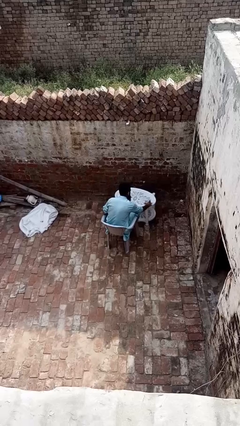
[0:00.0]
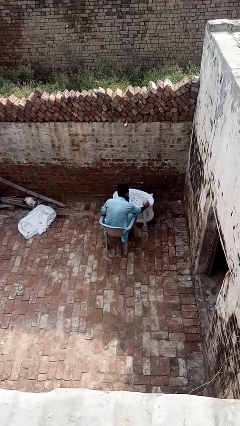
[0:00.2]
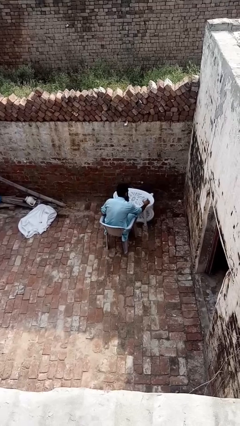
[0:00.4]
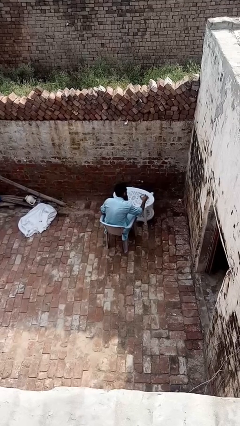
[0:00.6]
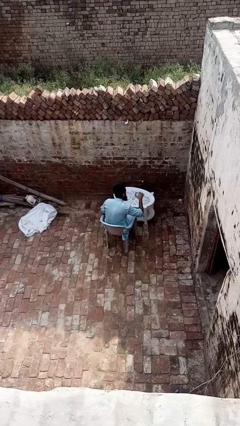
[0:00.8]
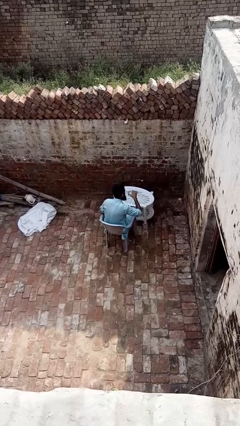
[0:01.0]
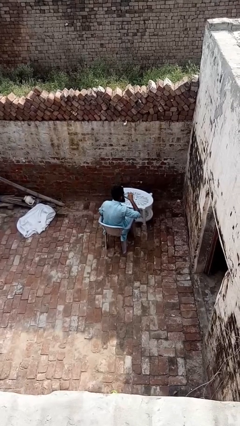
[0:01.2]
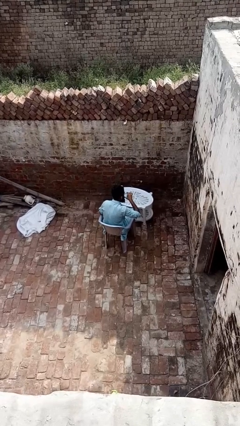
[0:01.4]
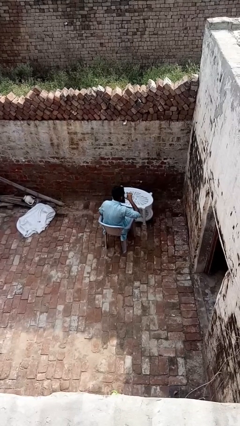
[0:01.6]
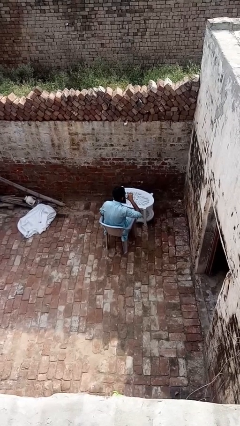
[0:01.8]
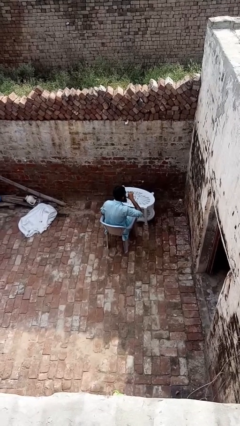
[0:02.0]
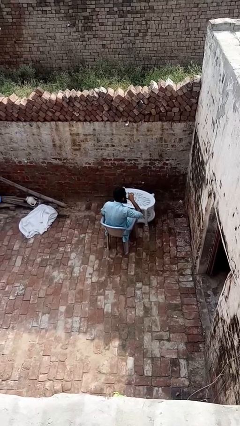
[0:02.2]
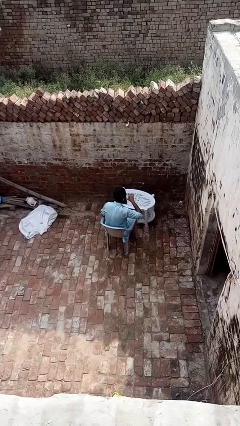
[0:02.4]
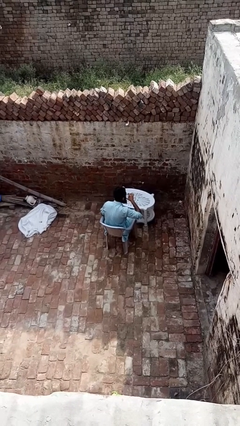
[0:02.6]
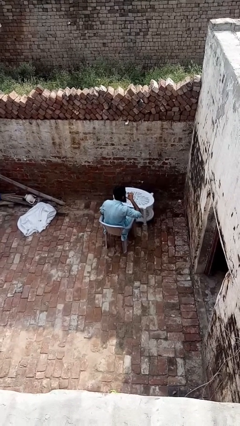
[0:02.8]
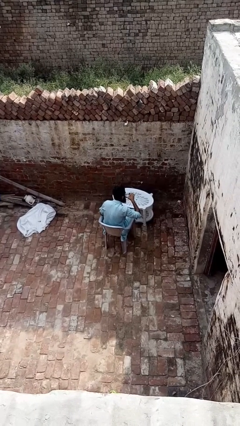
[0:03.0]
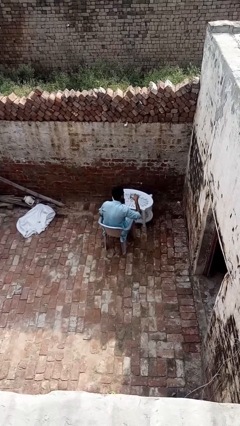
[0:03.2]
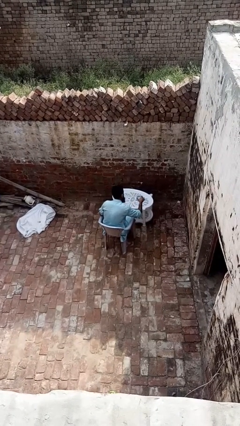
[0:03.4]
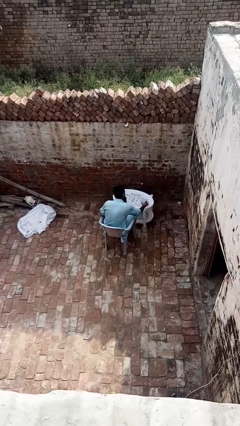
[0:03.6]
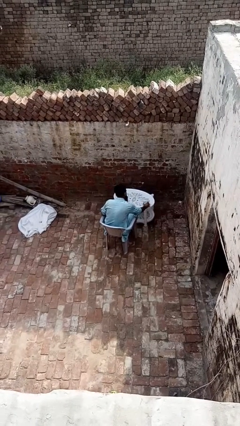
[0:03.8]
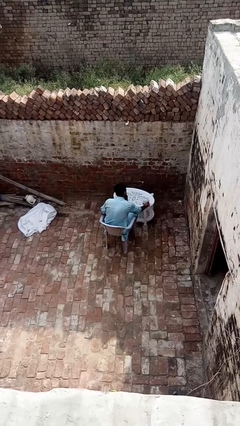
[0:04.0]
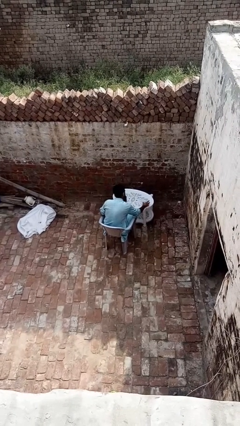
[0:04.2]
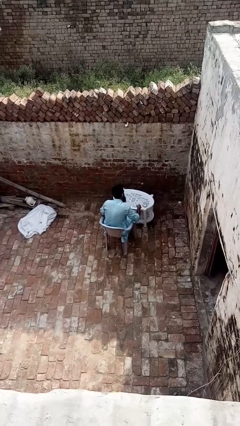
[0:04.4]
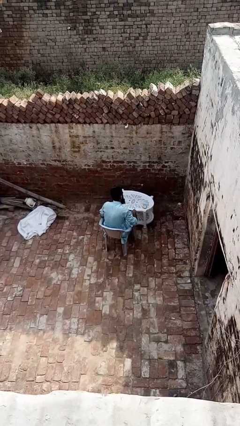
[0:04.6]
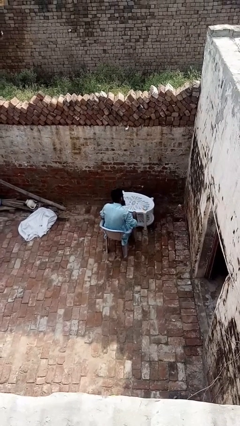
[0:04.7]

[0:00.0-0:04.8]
person drinks from cup

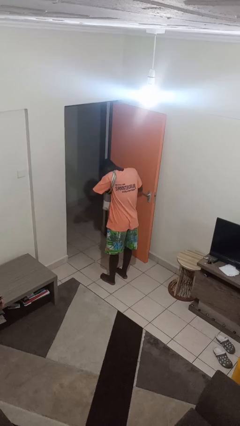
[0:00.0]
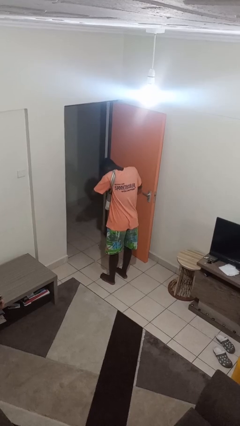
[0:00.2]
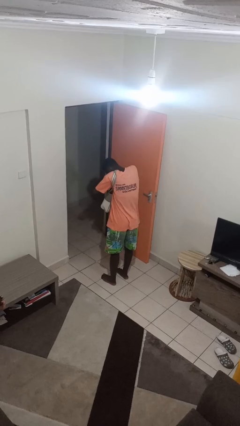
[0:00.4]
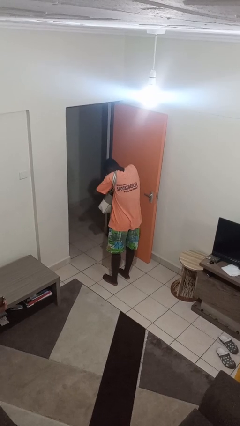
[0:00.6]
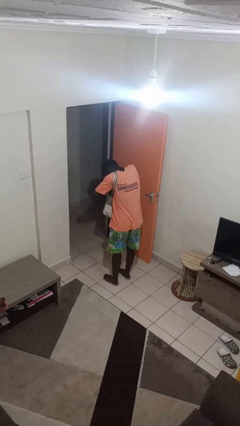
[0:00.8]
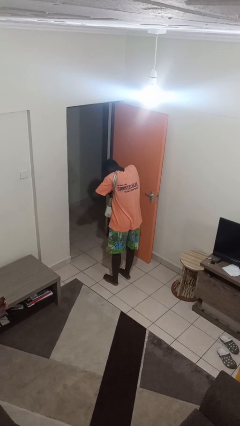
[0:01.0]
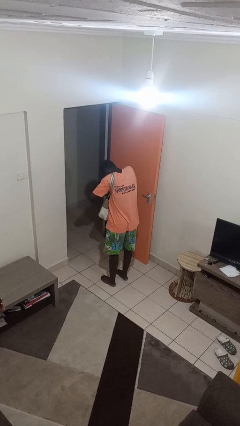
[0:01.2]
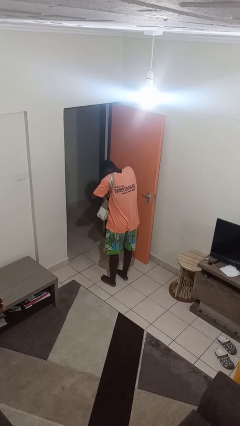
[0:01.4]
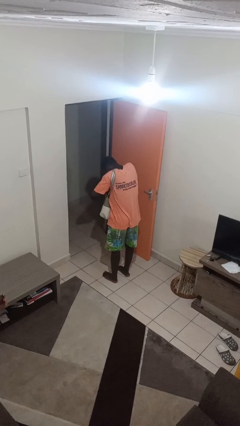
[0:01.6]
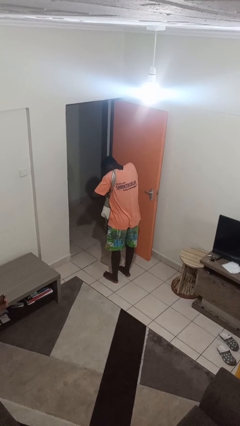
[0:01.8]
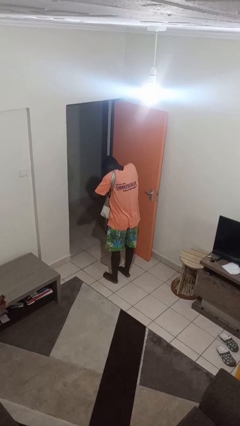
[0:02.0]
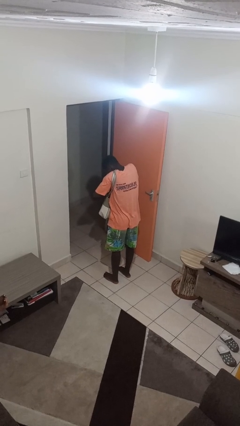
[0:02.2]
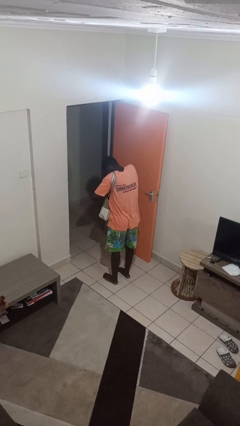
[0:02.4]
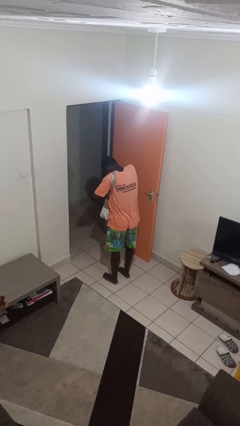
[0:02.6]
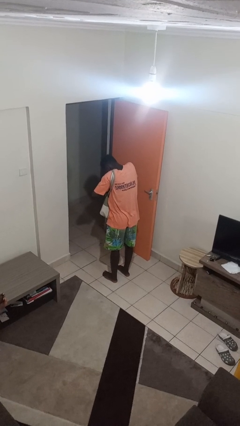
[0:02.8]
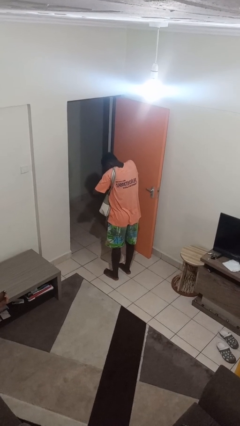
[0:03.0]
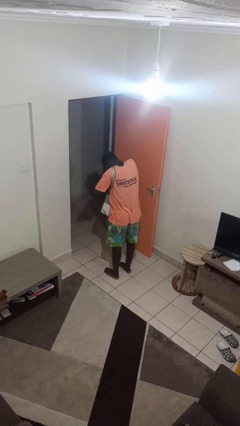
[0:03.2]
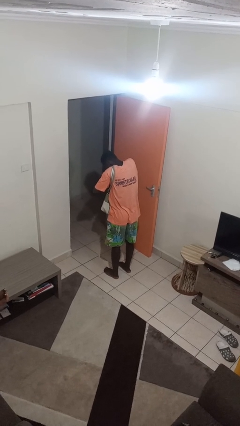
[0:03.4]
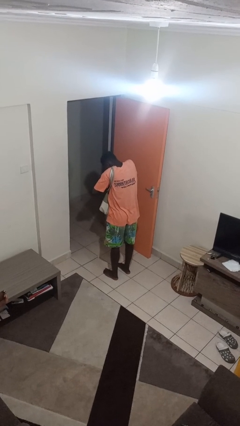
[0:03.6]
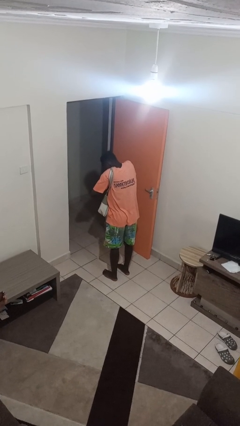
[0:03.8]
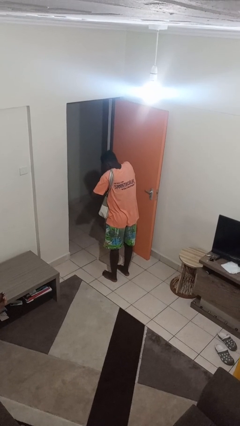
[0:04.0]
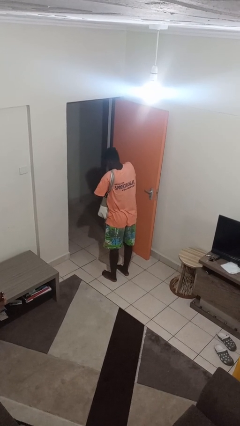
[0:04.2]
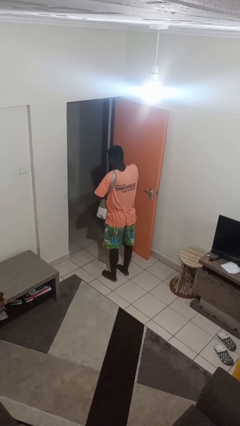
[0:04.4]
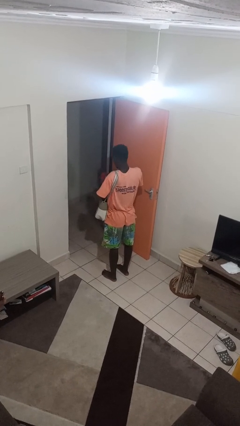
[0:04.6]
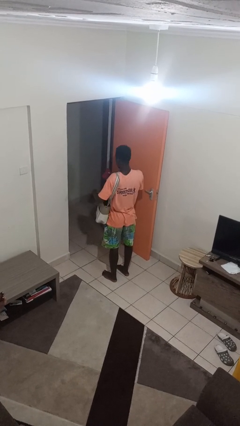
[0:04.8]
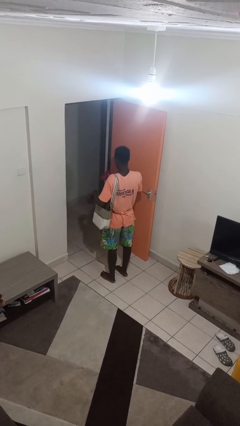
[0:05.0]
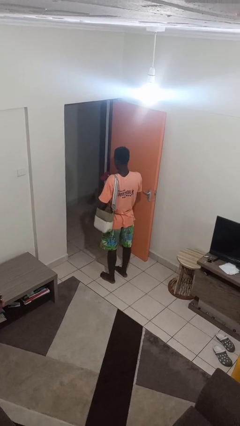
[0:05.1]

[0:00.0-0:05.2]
person searches in purse

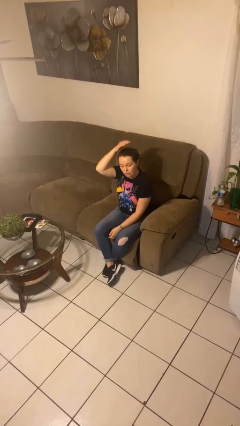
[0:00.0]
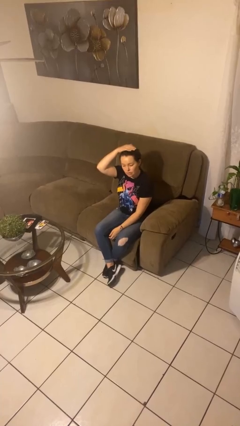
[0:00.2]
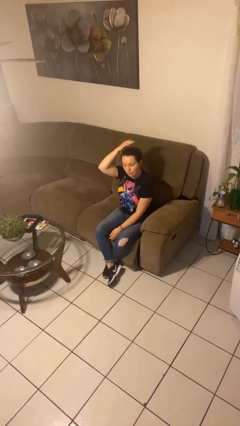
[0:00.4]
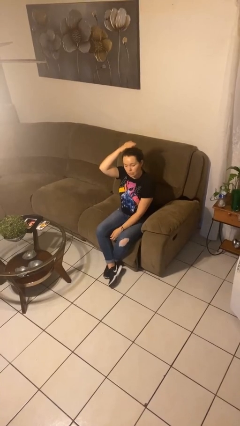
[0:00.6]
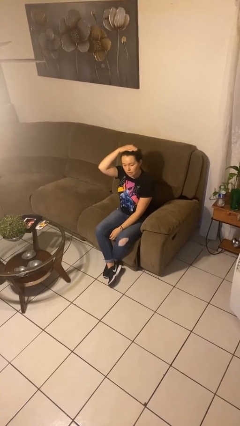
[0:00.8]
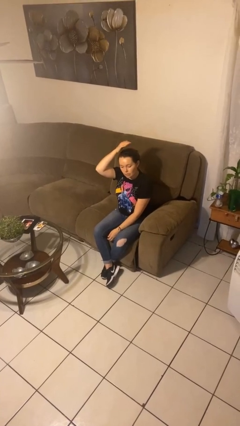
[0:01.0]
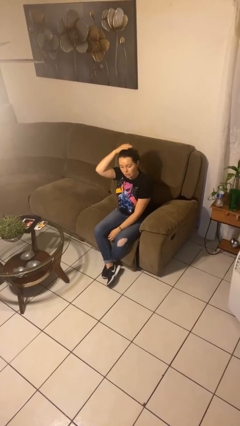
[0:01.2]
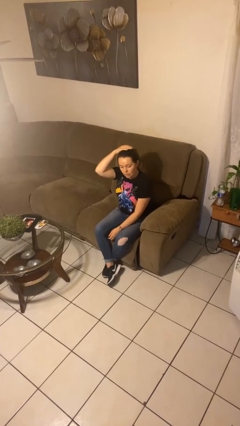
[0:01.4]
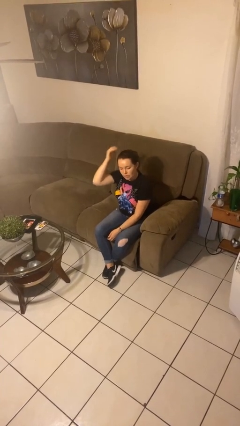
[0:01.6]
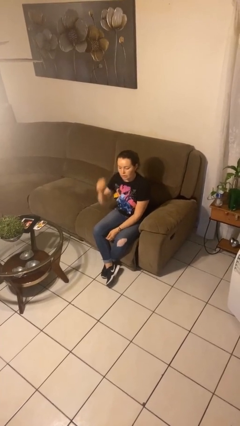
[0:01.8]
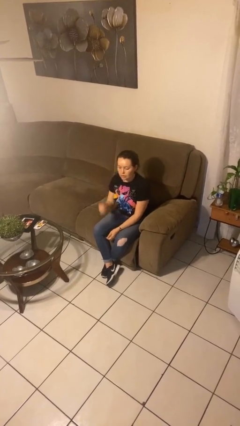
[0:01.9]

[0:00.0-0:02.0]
person pats head

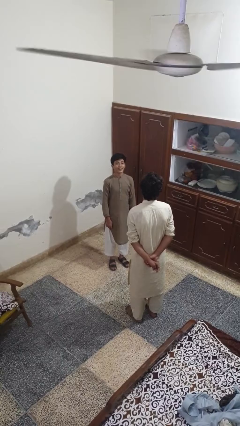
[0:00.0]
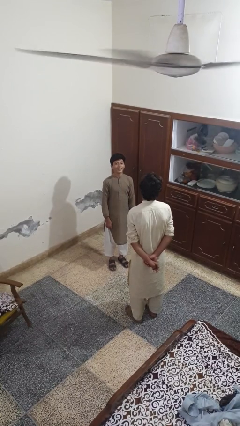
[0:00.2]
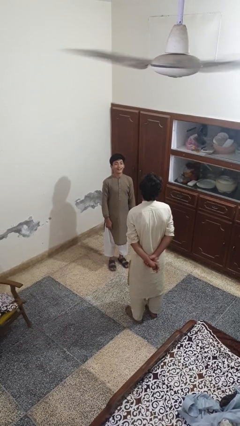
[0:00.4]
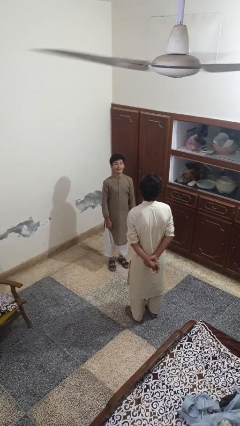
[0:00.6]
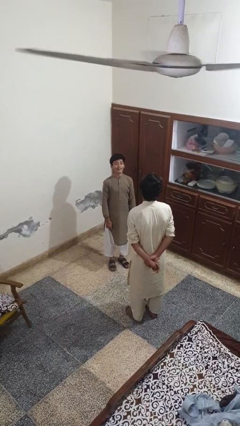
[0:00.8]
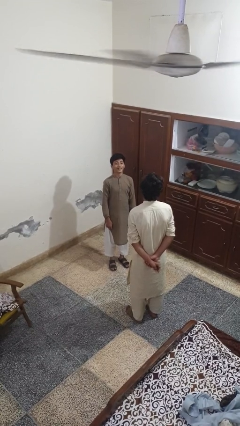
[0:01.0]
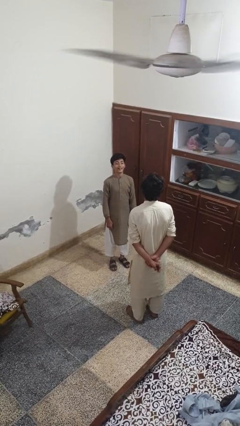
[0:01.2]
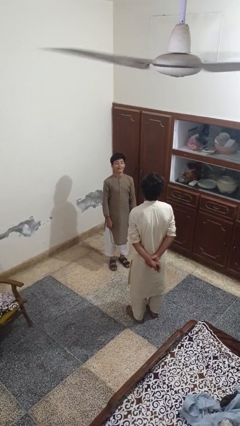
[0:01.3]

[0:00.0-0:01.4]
person laughs with person

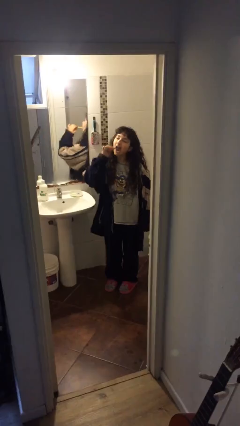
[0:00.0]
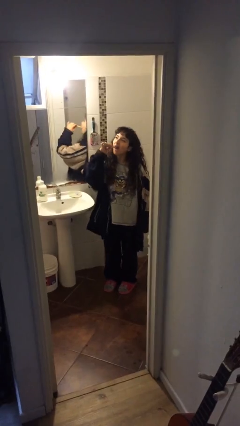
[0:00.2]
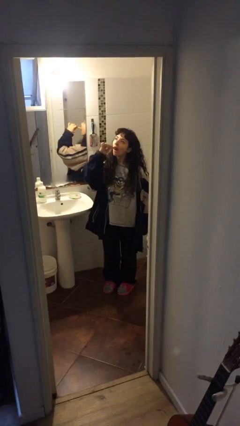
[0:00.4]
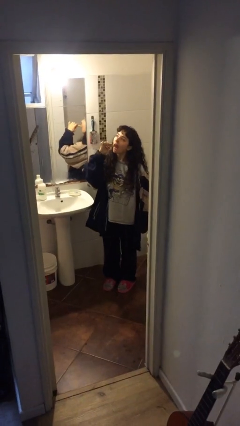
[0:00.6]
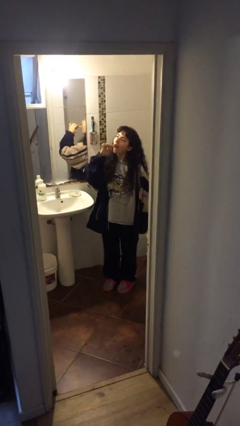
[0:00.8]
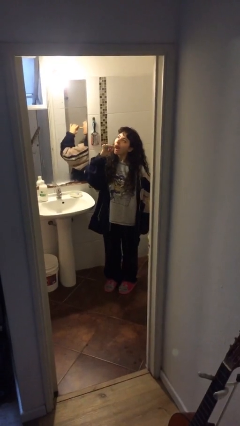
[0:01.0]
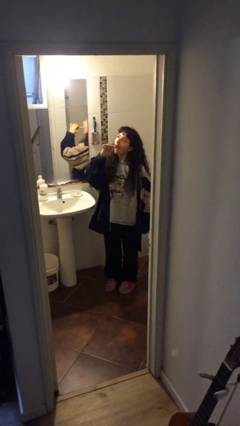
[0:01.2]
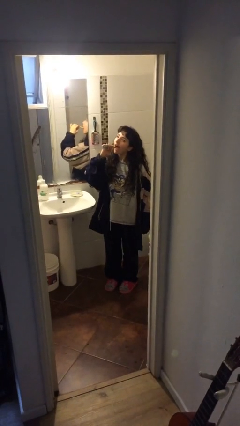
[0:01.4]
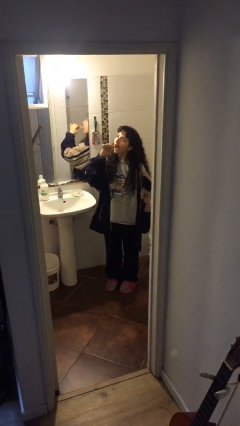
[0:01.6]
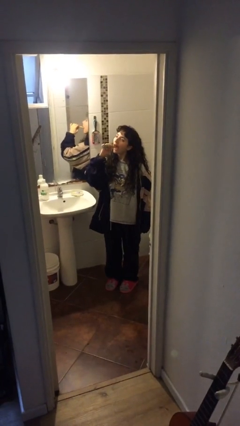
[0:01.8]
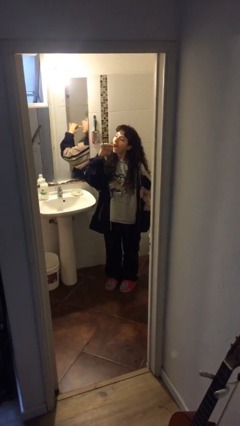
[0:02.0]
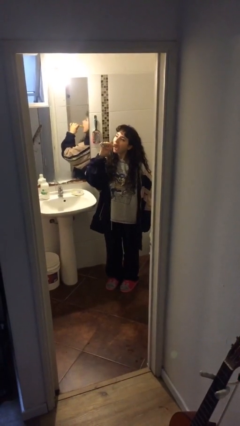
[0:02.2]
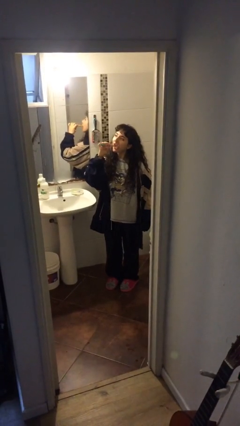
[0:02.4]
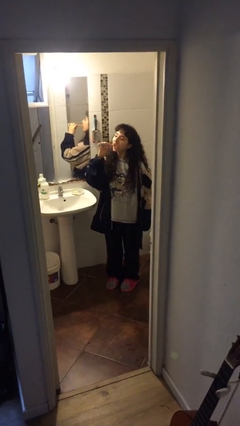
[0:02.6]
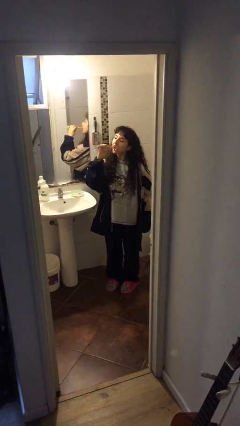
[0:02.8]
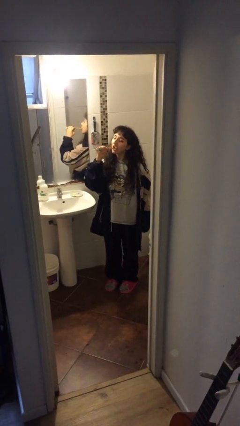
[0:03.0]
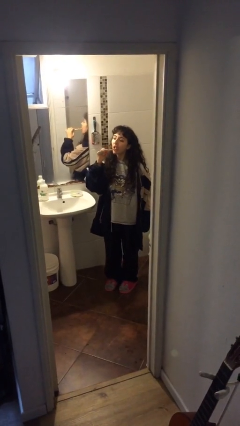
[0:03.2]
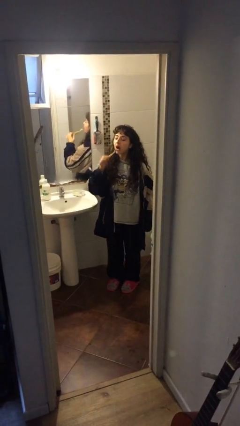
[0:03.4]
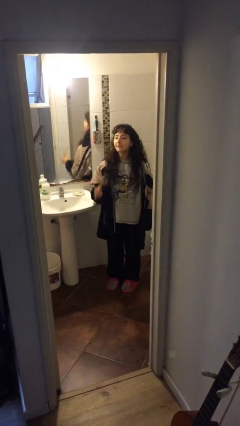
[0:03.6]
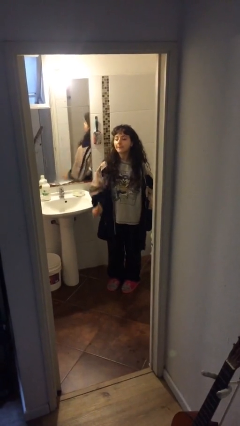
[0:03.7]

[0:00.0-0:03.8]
person brushes teeth
